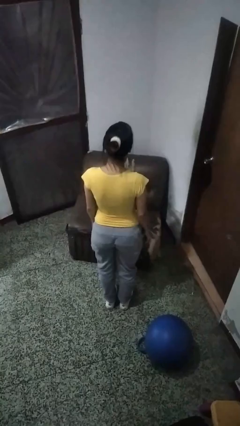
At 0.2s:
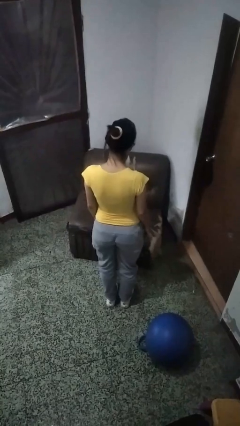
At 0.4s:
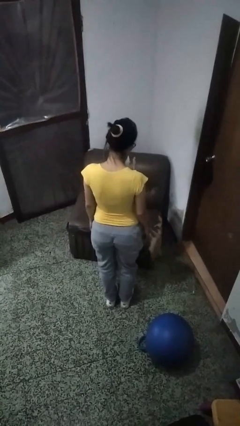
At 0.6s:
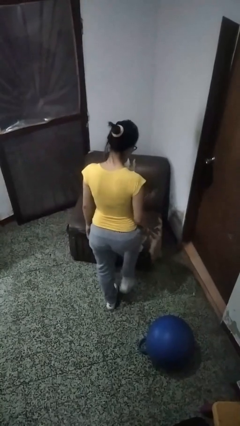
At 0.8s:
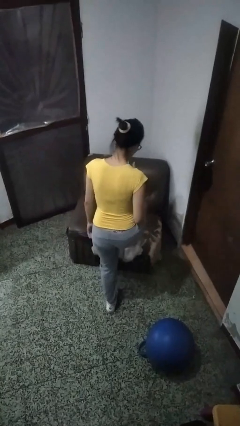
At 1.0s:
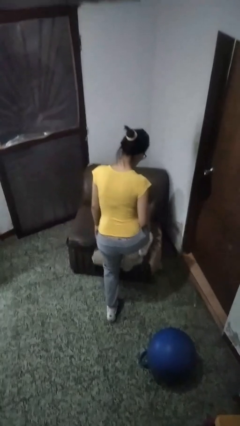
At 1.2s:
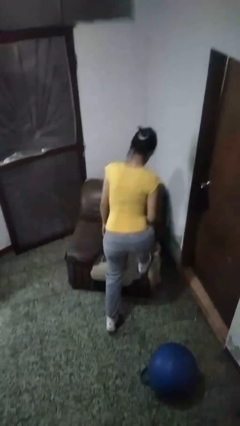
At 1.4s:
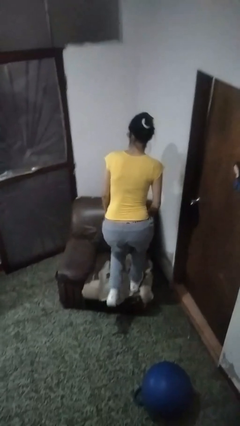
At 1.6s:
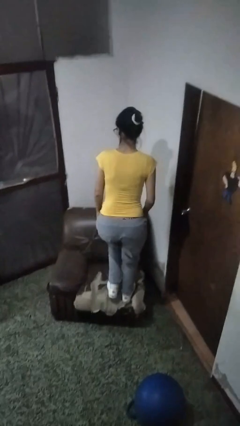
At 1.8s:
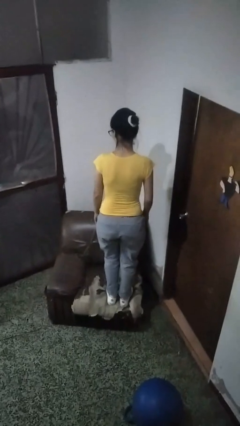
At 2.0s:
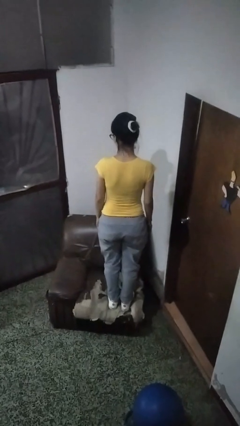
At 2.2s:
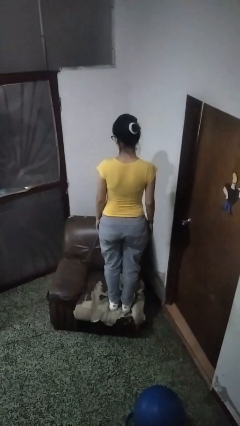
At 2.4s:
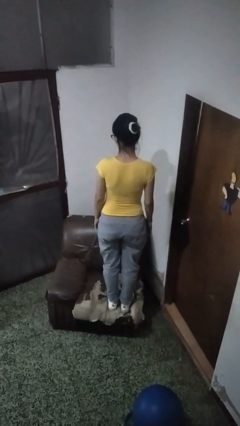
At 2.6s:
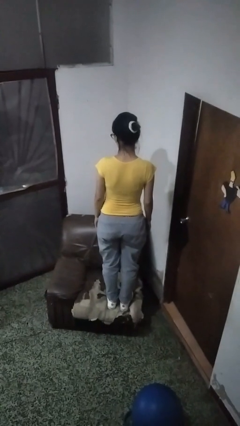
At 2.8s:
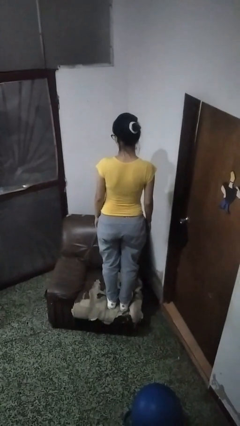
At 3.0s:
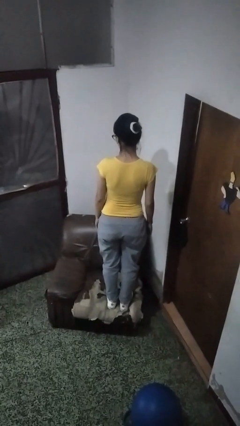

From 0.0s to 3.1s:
person climbs on couch

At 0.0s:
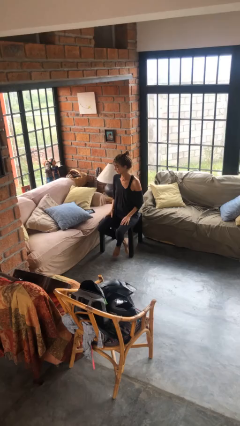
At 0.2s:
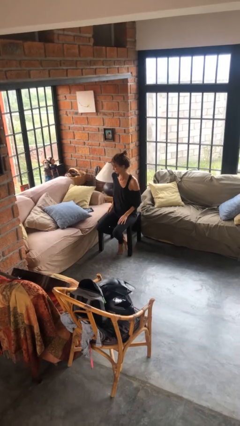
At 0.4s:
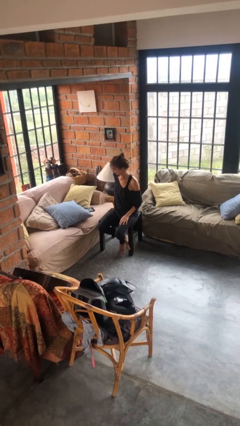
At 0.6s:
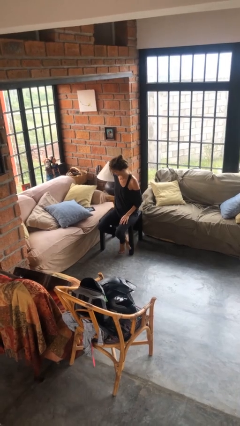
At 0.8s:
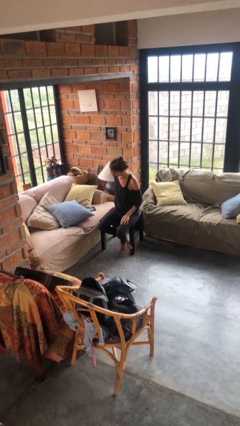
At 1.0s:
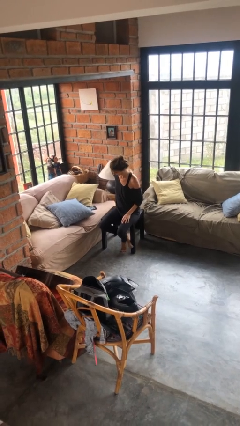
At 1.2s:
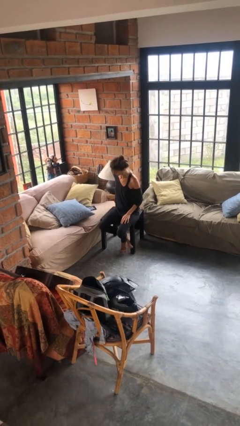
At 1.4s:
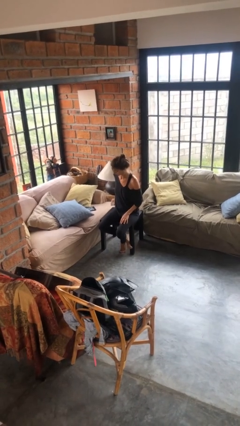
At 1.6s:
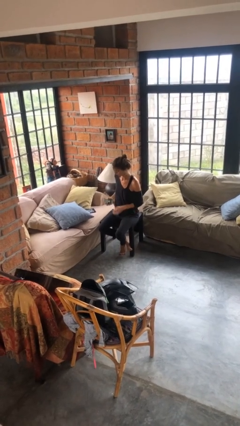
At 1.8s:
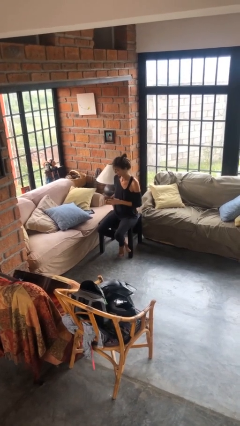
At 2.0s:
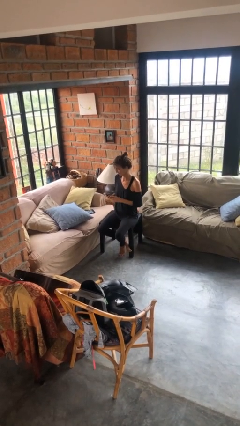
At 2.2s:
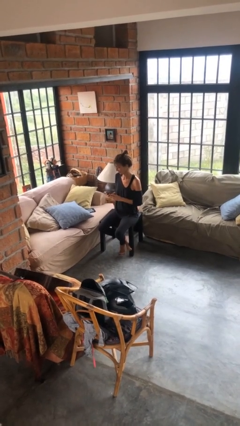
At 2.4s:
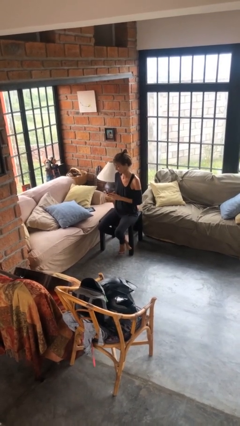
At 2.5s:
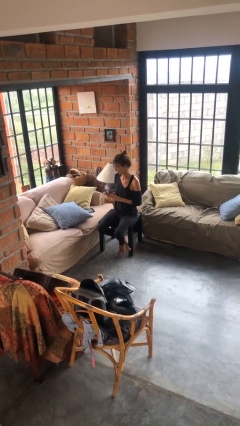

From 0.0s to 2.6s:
person takes phone from pocket

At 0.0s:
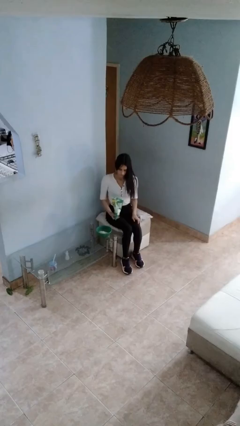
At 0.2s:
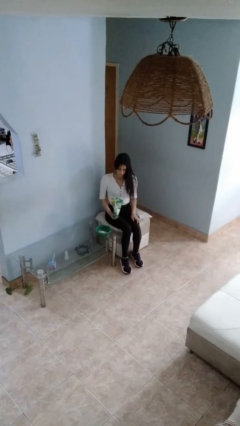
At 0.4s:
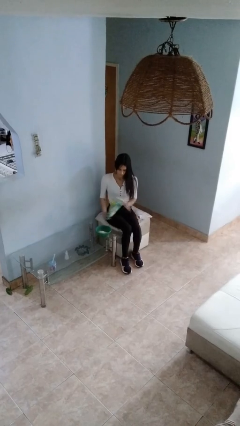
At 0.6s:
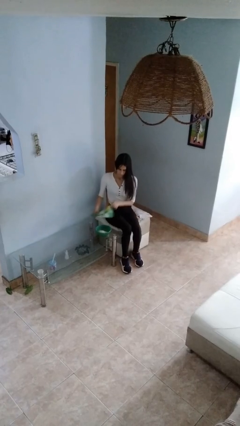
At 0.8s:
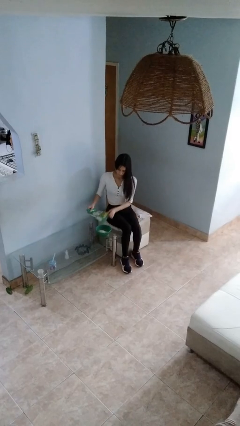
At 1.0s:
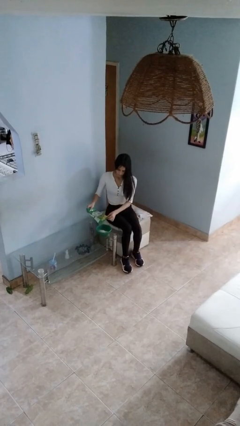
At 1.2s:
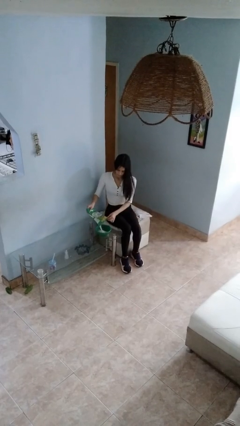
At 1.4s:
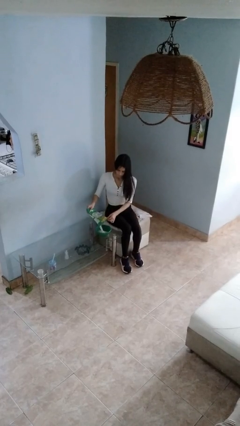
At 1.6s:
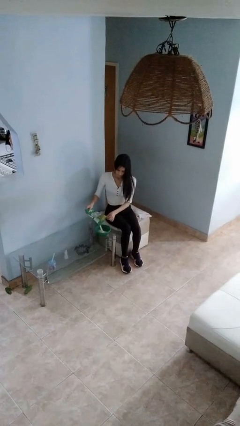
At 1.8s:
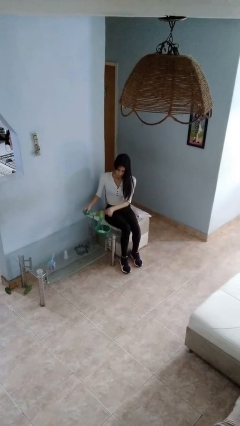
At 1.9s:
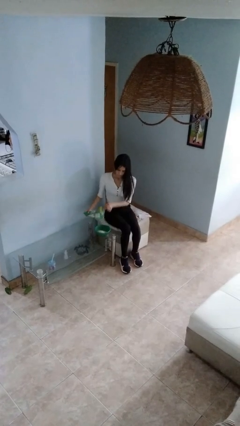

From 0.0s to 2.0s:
person pours into bowl

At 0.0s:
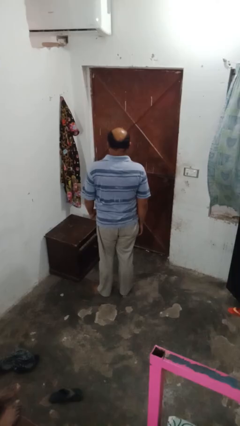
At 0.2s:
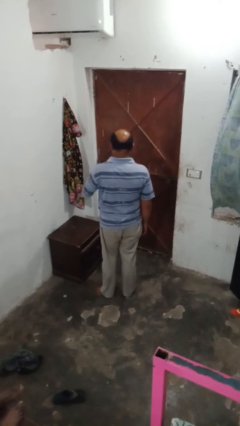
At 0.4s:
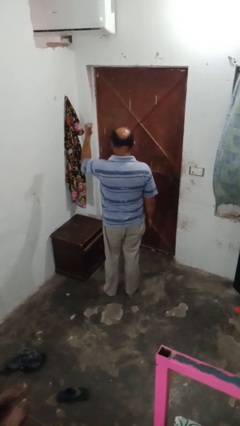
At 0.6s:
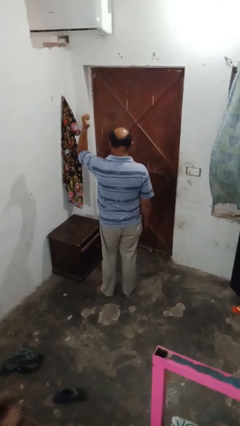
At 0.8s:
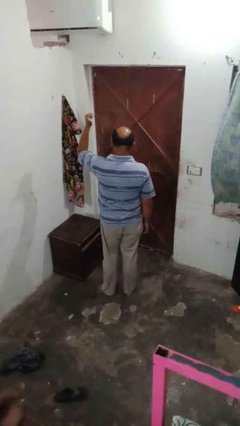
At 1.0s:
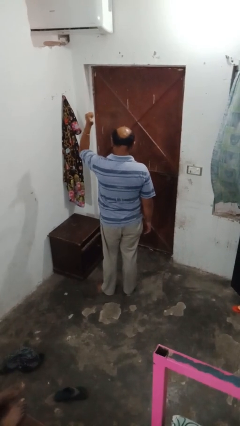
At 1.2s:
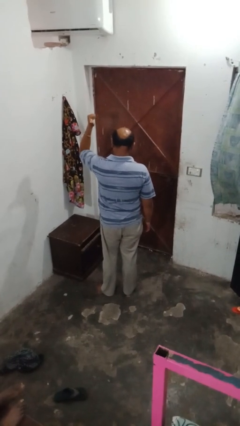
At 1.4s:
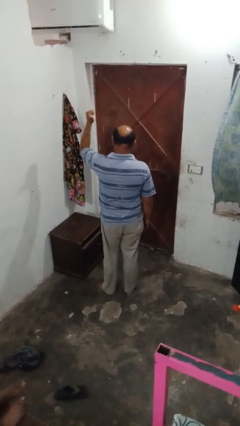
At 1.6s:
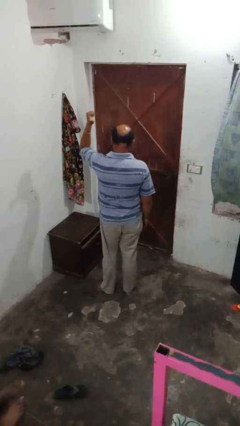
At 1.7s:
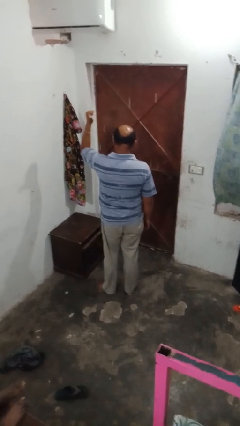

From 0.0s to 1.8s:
person gestures behind me

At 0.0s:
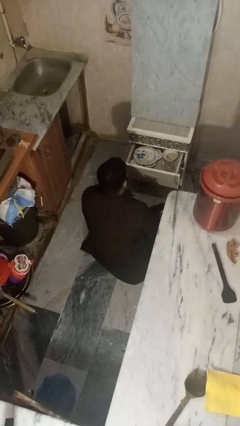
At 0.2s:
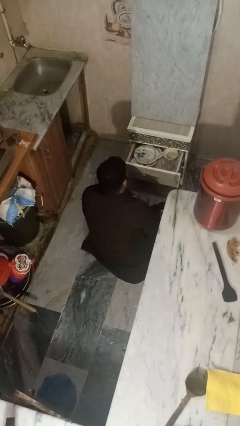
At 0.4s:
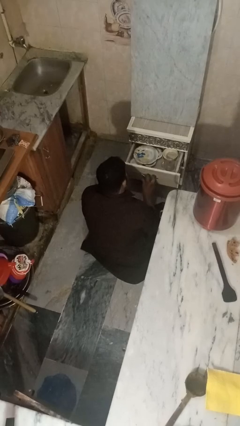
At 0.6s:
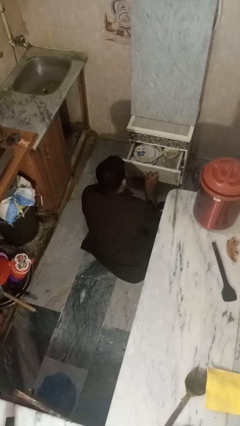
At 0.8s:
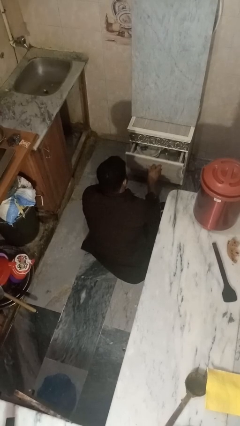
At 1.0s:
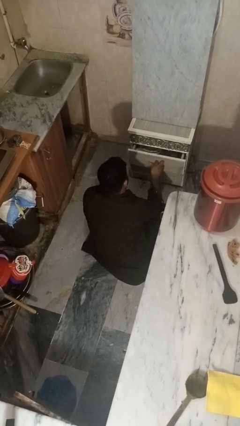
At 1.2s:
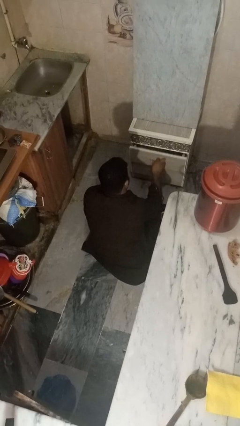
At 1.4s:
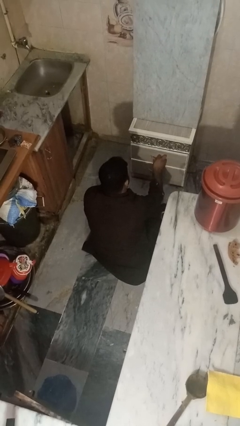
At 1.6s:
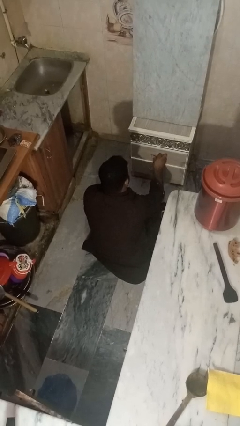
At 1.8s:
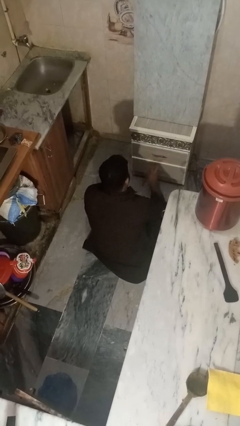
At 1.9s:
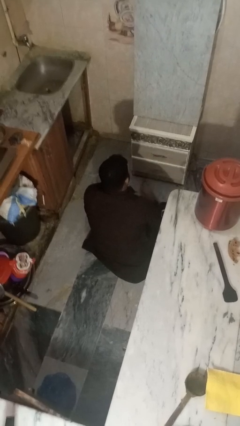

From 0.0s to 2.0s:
person closes kitchen drawer

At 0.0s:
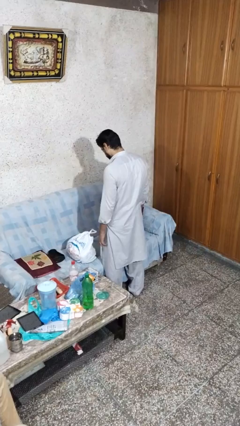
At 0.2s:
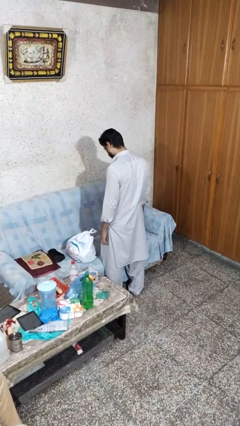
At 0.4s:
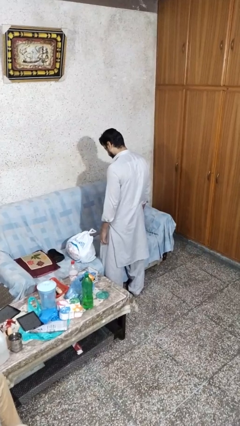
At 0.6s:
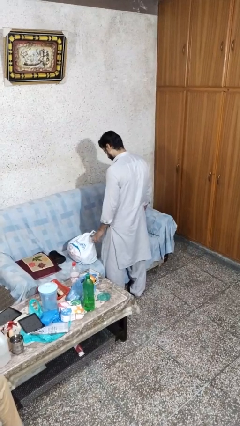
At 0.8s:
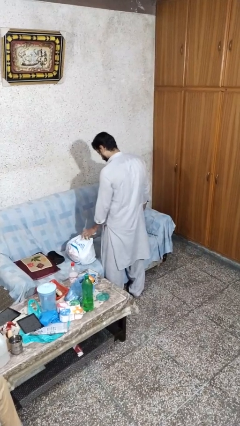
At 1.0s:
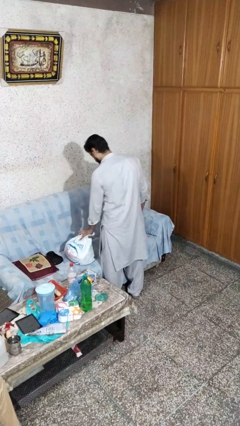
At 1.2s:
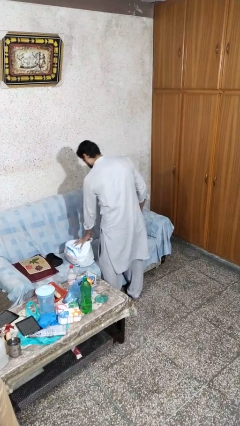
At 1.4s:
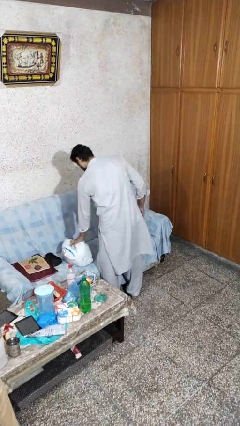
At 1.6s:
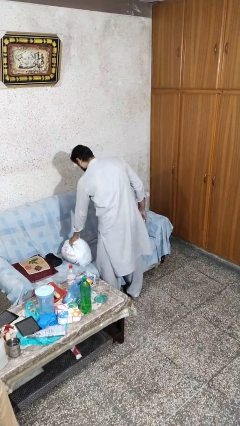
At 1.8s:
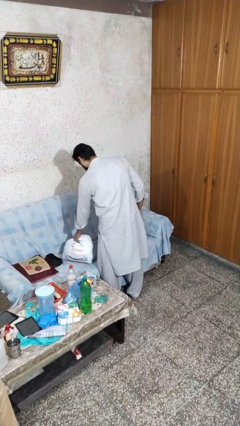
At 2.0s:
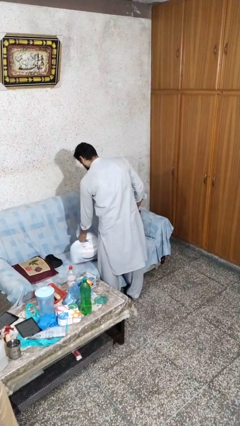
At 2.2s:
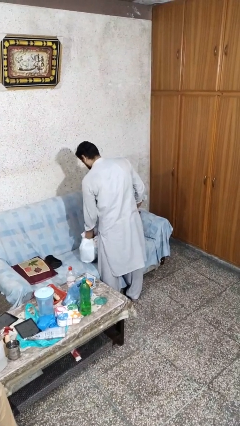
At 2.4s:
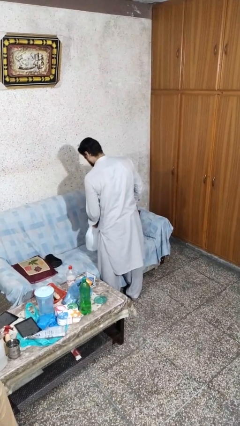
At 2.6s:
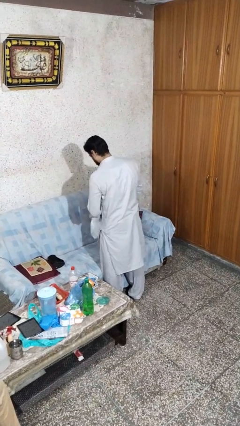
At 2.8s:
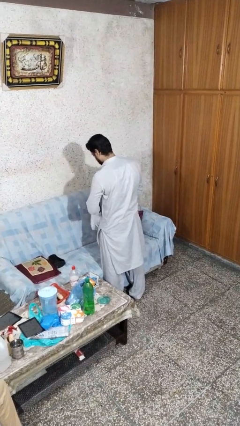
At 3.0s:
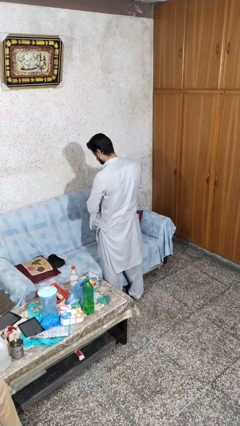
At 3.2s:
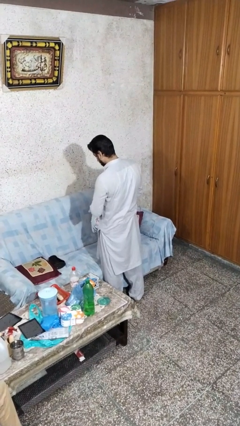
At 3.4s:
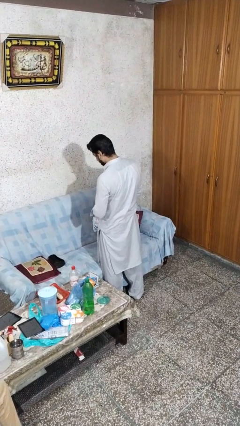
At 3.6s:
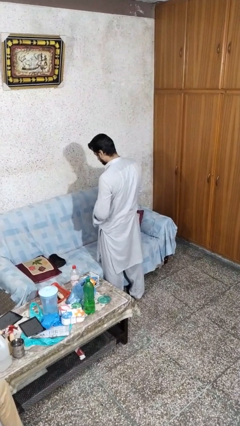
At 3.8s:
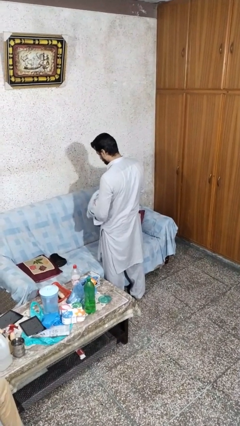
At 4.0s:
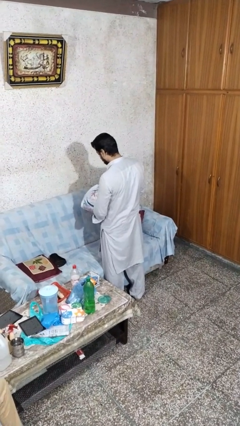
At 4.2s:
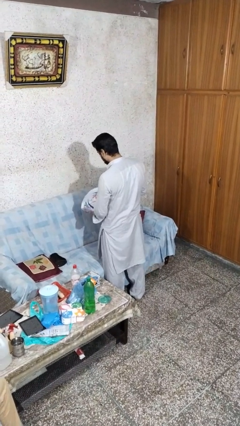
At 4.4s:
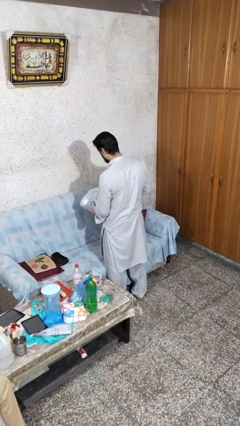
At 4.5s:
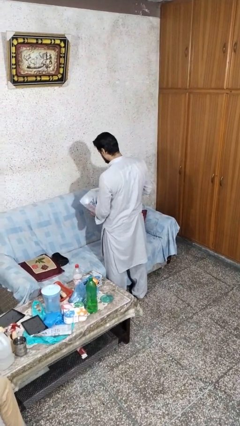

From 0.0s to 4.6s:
person picks up object from couch

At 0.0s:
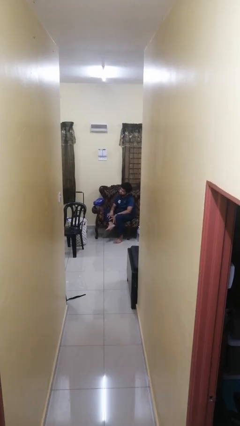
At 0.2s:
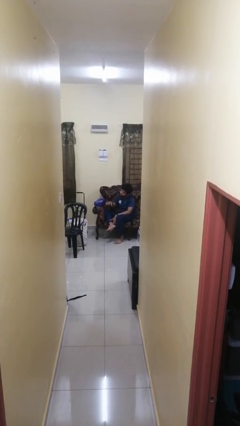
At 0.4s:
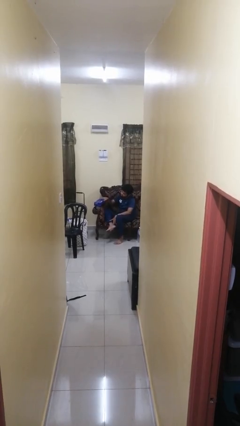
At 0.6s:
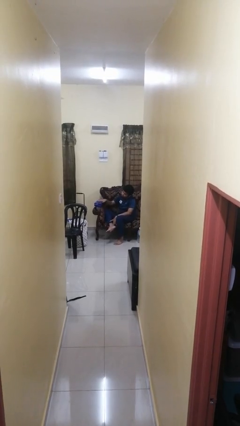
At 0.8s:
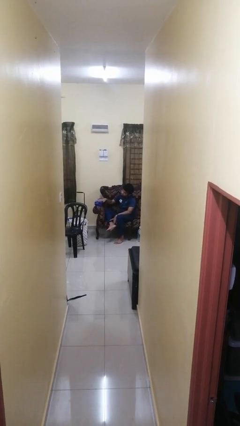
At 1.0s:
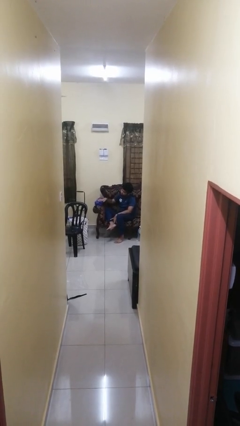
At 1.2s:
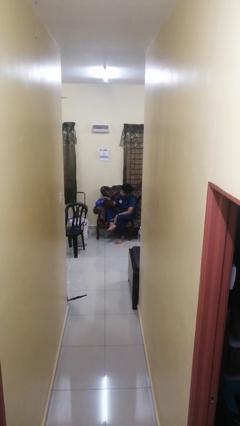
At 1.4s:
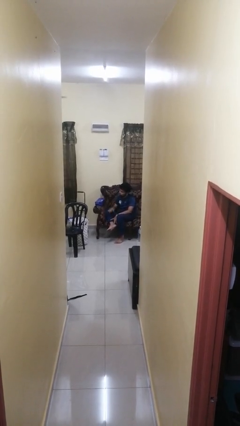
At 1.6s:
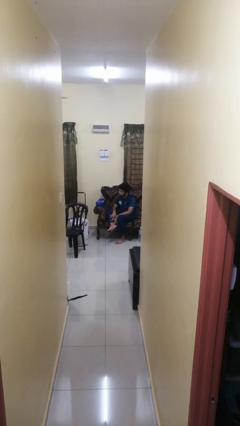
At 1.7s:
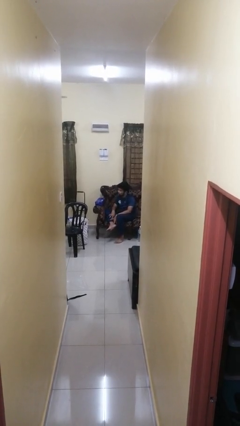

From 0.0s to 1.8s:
person taps object with finger
